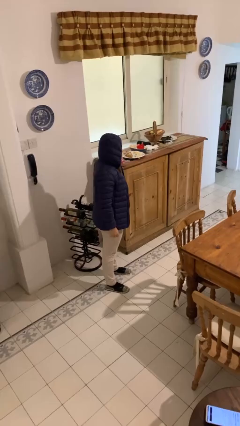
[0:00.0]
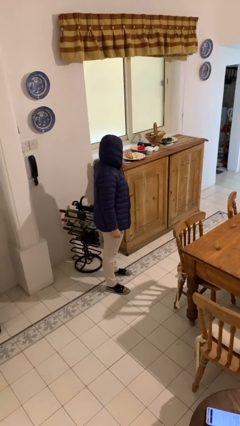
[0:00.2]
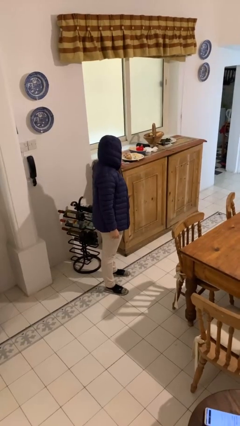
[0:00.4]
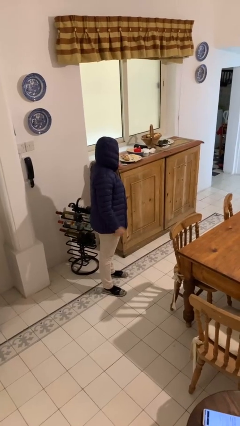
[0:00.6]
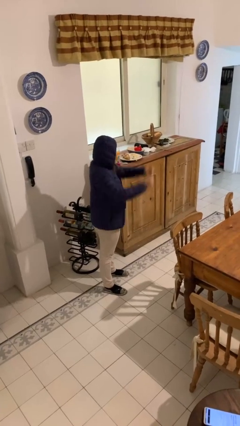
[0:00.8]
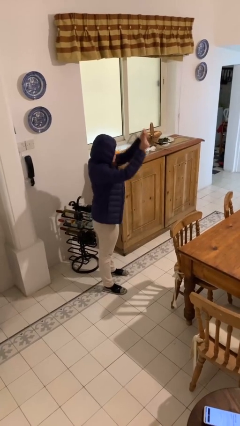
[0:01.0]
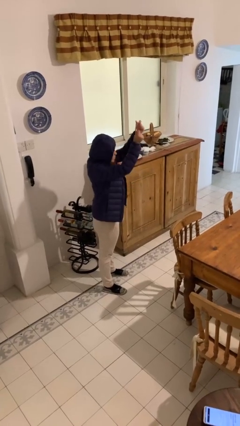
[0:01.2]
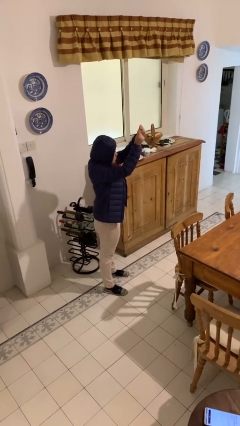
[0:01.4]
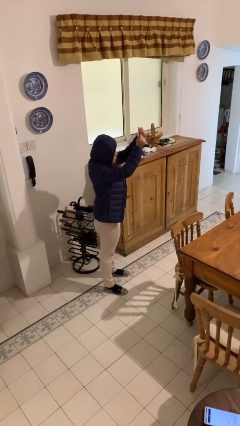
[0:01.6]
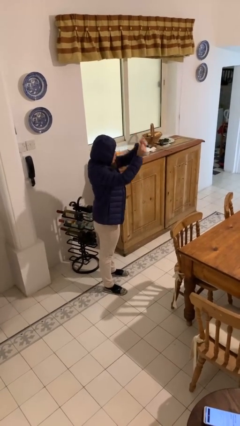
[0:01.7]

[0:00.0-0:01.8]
person snaps fingers

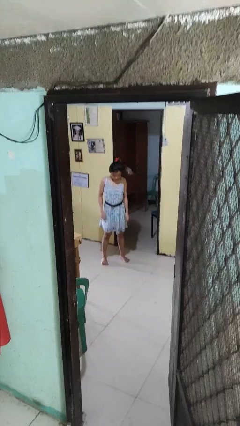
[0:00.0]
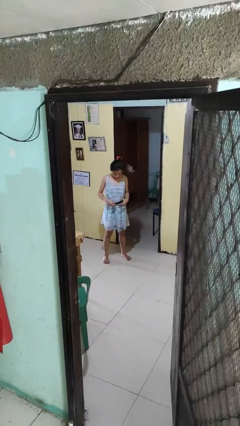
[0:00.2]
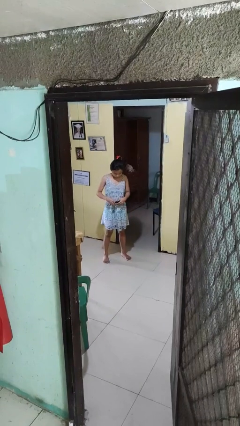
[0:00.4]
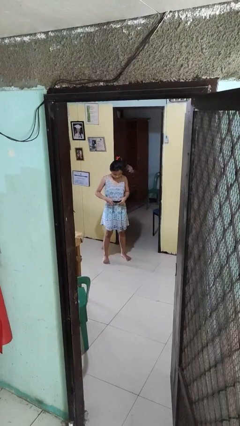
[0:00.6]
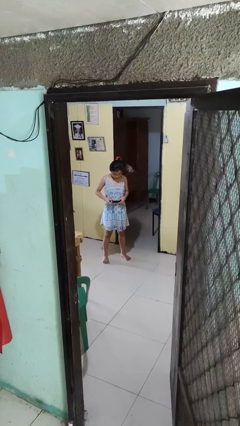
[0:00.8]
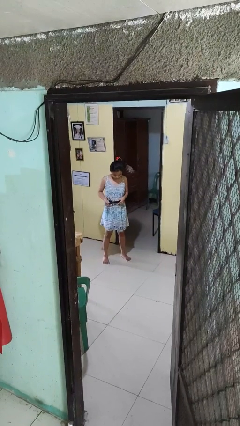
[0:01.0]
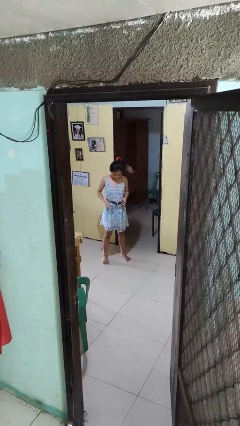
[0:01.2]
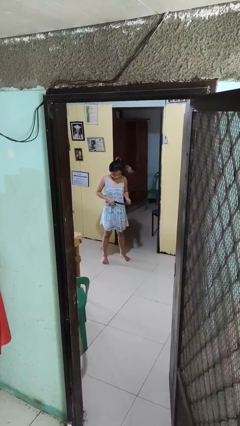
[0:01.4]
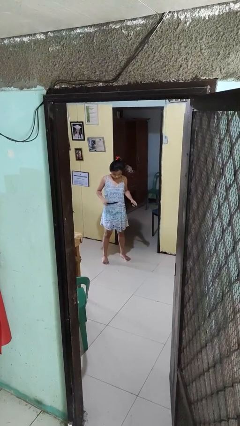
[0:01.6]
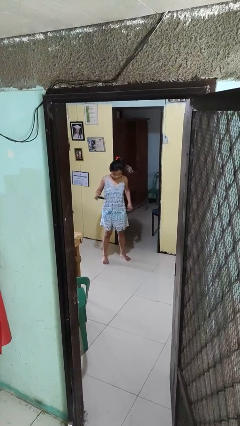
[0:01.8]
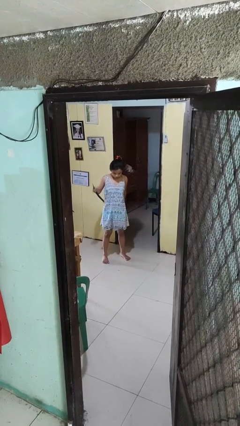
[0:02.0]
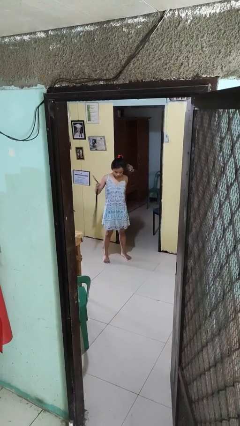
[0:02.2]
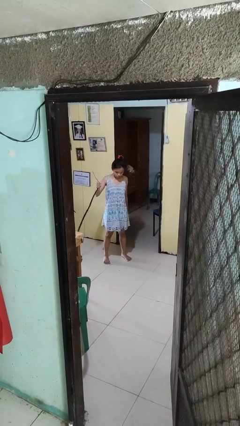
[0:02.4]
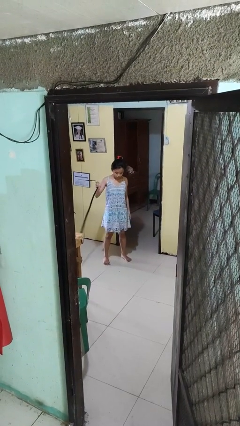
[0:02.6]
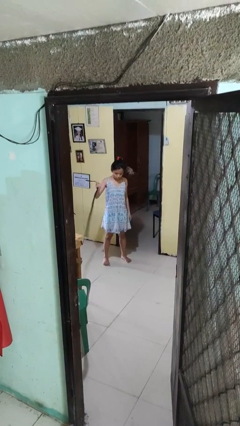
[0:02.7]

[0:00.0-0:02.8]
person takes off belt

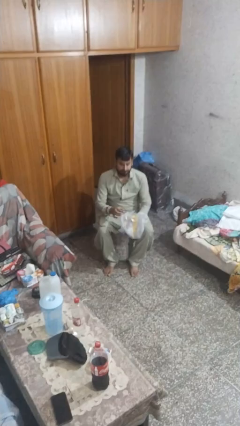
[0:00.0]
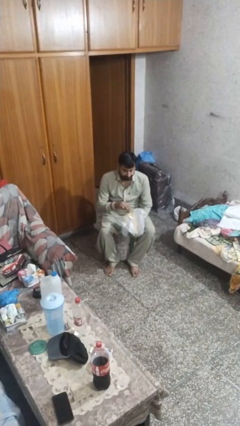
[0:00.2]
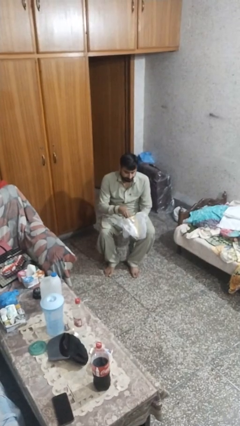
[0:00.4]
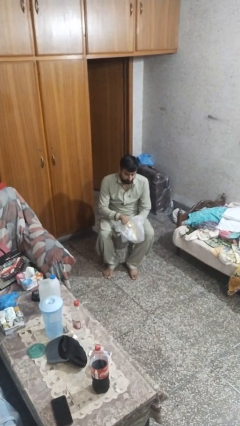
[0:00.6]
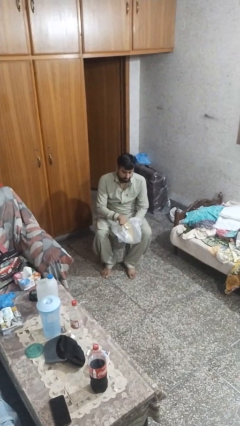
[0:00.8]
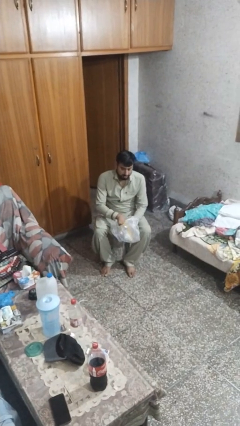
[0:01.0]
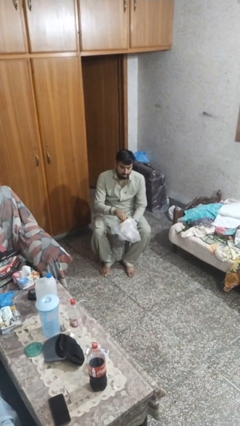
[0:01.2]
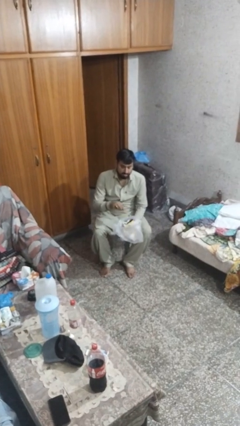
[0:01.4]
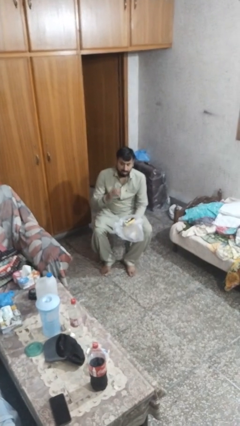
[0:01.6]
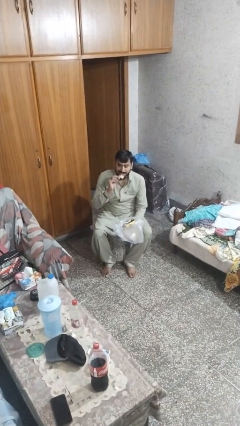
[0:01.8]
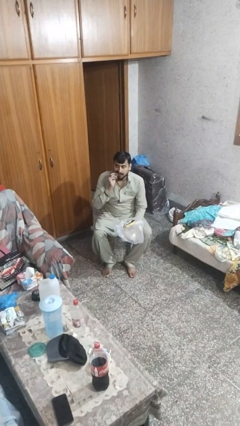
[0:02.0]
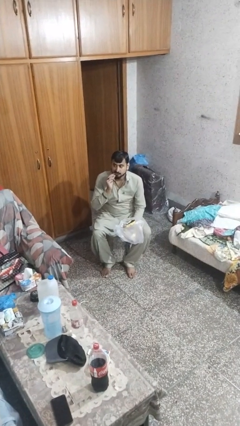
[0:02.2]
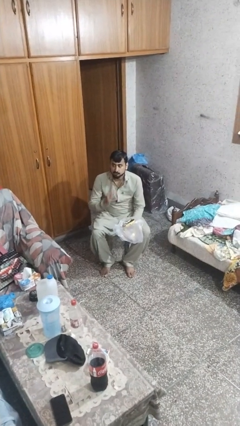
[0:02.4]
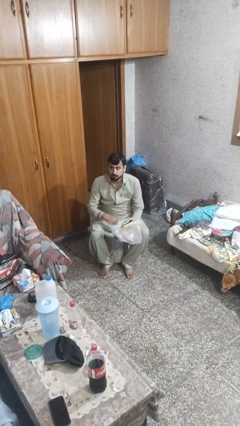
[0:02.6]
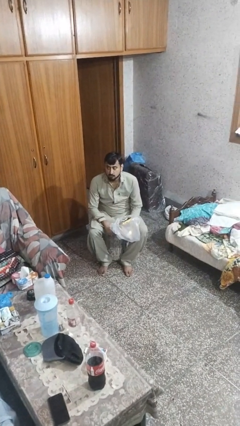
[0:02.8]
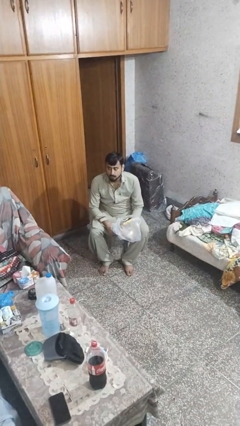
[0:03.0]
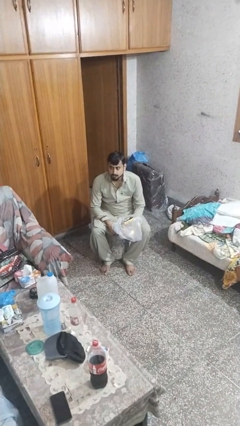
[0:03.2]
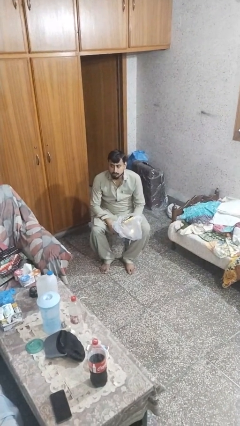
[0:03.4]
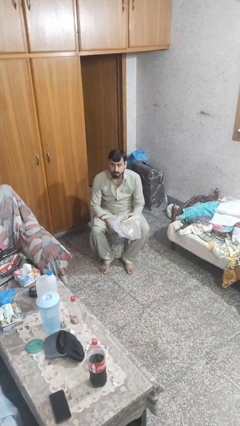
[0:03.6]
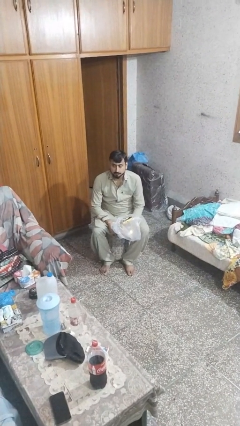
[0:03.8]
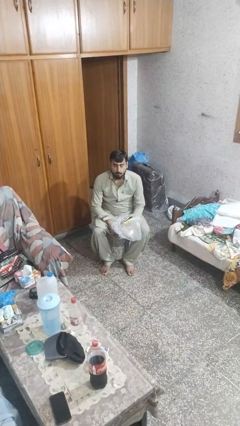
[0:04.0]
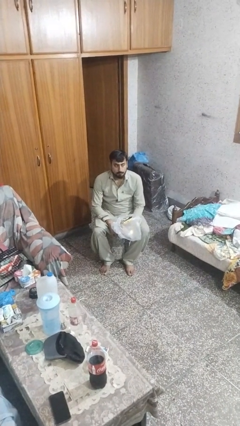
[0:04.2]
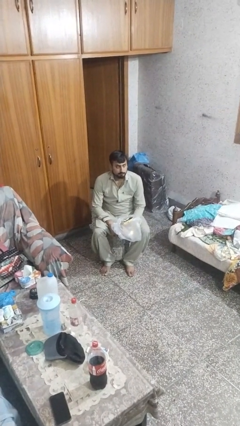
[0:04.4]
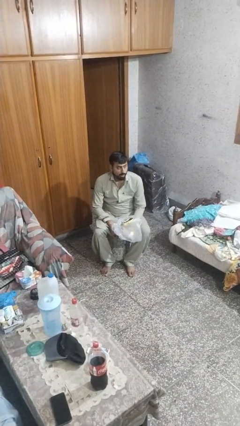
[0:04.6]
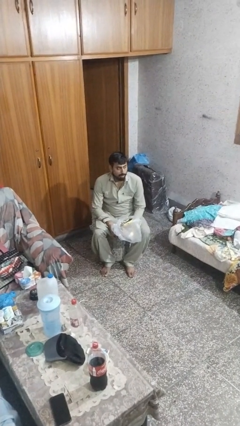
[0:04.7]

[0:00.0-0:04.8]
person eats snack from bag

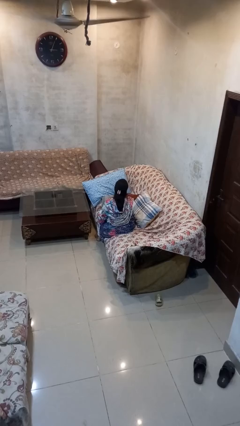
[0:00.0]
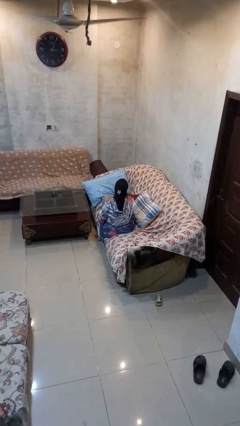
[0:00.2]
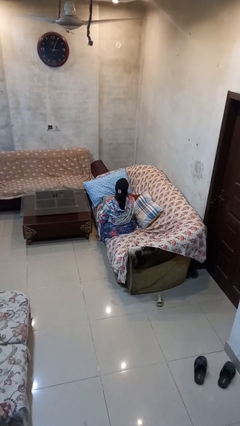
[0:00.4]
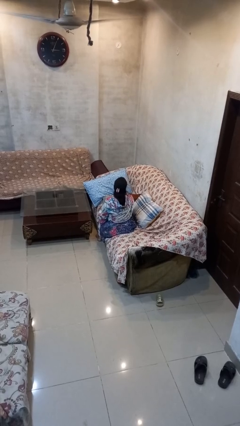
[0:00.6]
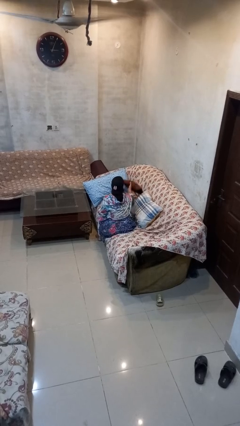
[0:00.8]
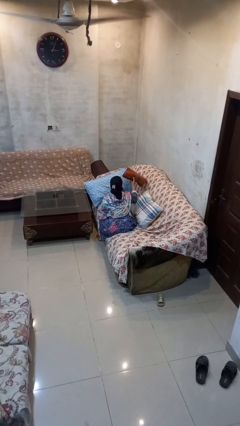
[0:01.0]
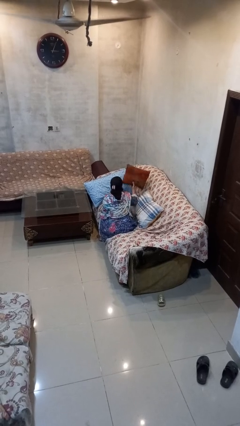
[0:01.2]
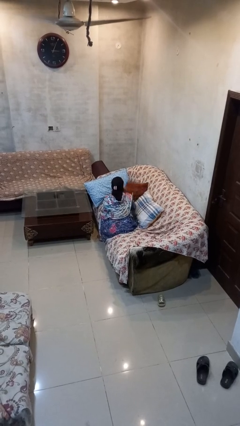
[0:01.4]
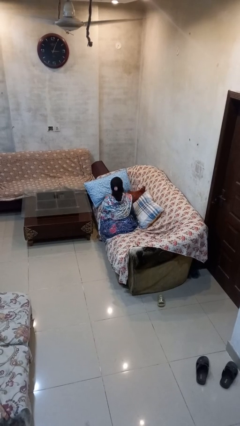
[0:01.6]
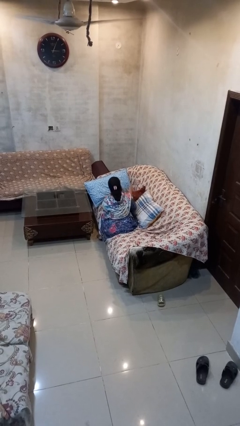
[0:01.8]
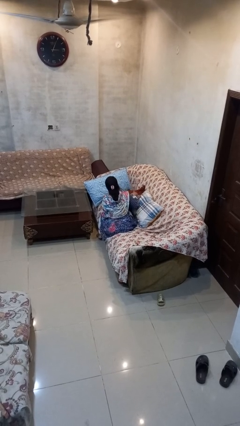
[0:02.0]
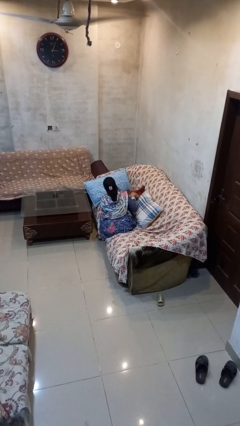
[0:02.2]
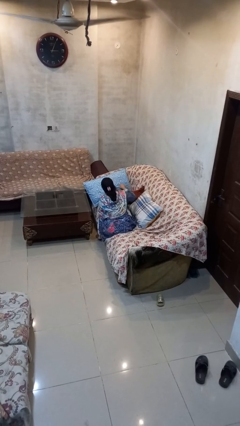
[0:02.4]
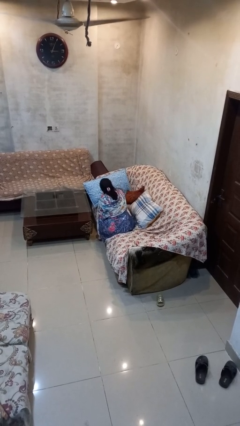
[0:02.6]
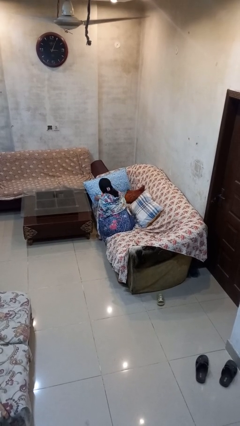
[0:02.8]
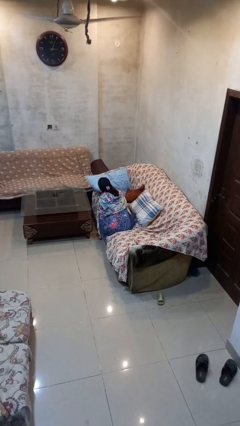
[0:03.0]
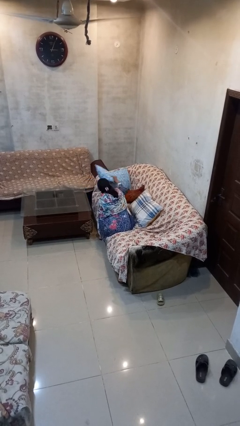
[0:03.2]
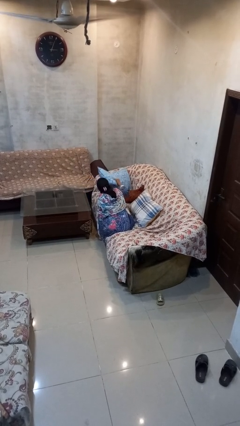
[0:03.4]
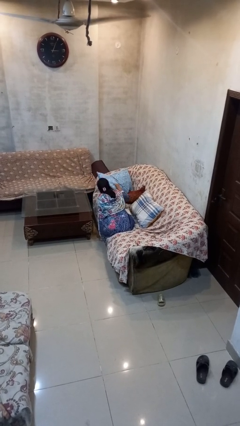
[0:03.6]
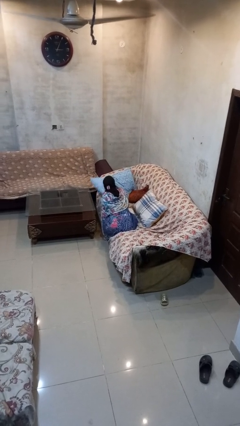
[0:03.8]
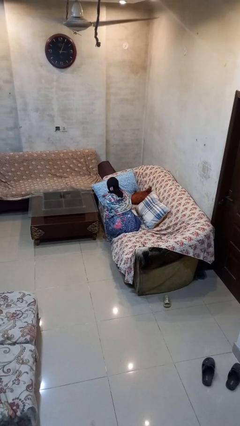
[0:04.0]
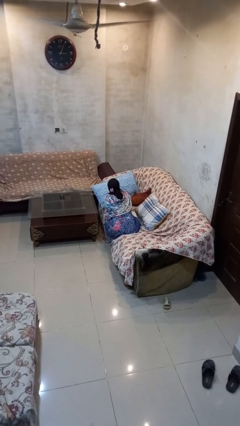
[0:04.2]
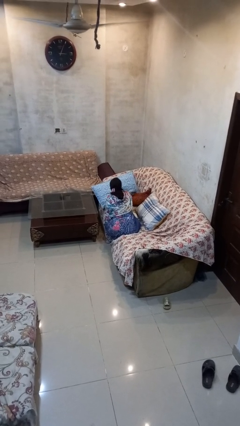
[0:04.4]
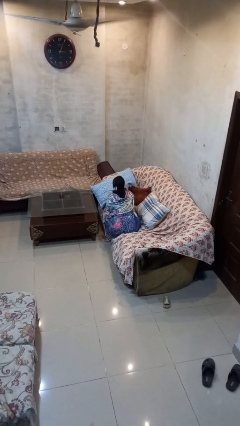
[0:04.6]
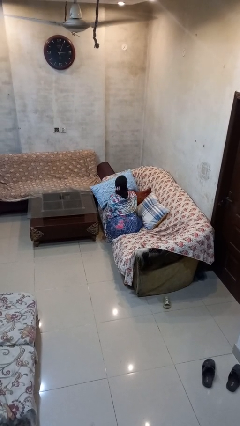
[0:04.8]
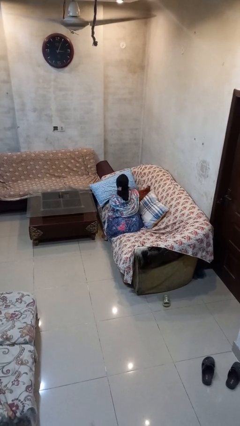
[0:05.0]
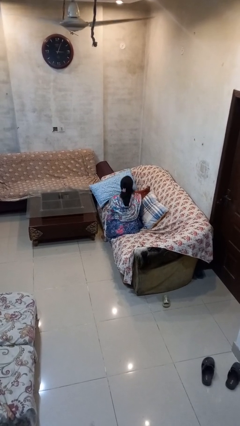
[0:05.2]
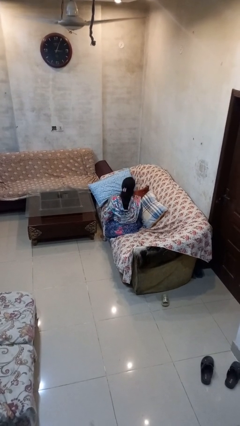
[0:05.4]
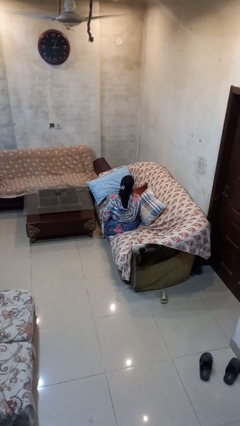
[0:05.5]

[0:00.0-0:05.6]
person searches in couch

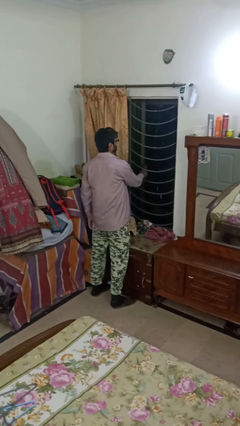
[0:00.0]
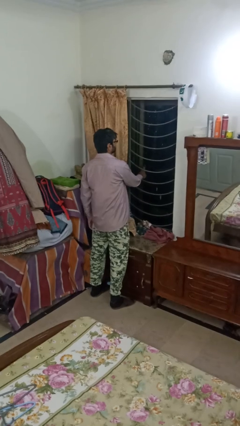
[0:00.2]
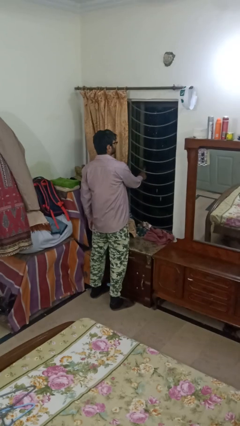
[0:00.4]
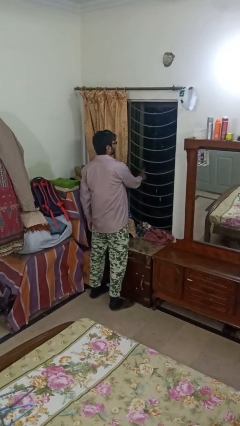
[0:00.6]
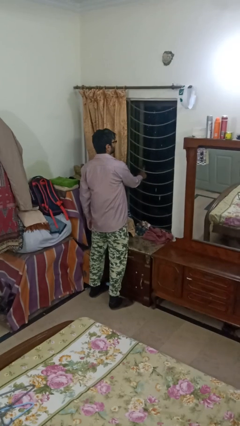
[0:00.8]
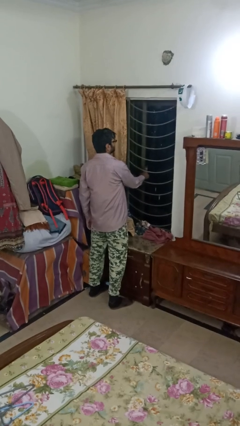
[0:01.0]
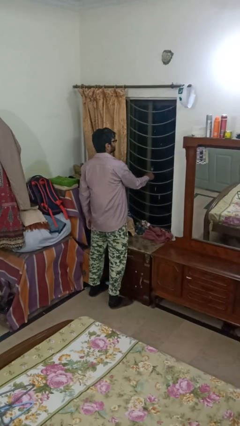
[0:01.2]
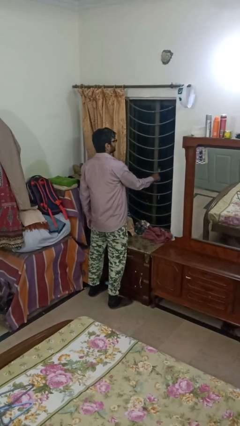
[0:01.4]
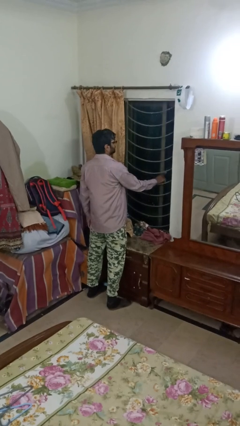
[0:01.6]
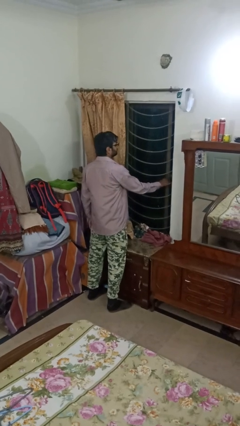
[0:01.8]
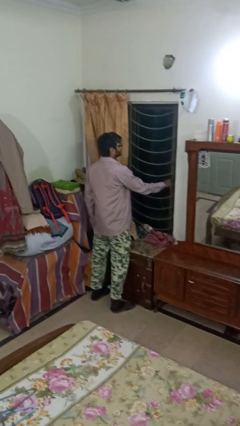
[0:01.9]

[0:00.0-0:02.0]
person closes home window

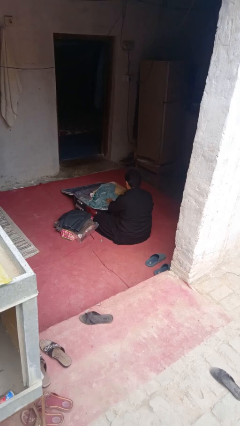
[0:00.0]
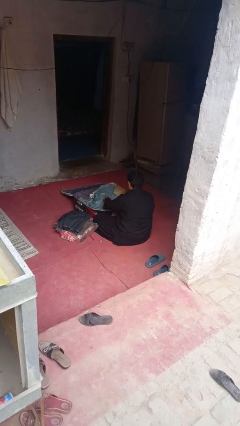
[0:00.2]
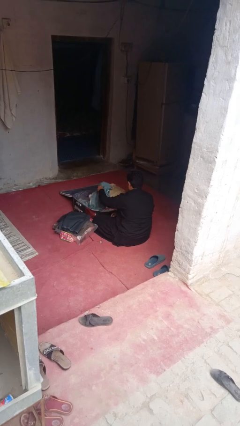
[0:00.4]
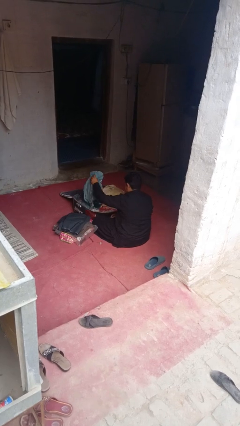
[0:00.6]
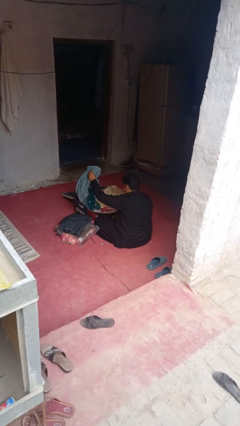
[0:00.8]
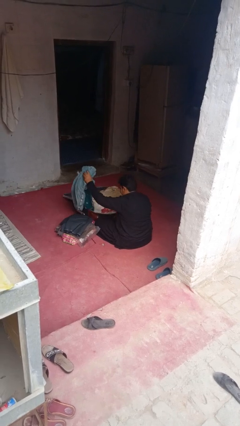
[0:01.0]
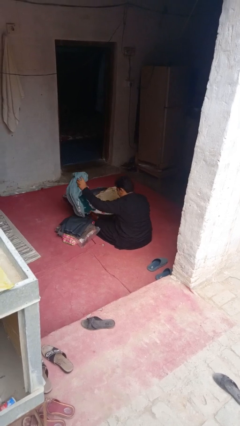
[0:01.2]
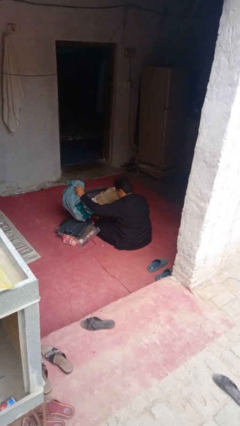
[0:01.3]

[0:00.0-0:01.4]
person unloads clothes from suitcase
